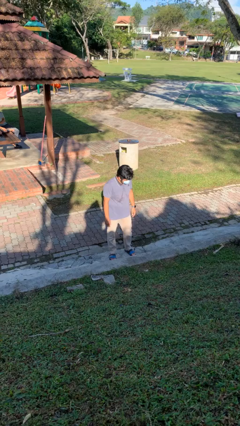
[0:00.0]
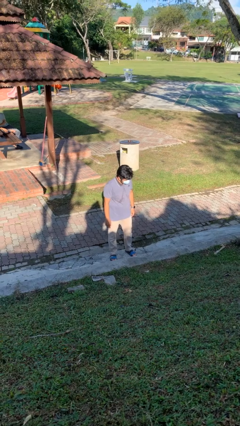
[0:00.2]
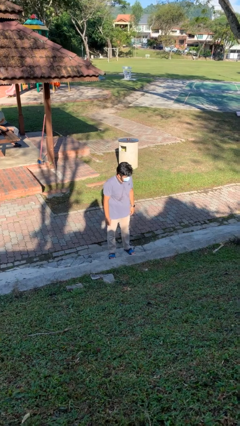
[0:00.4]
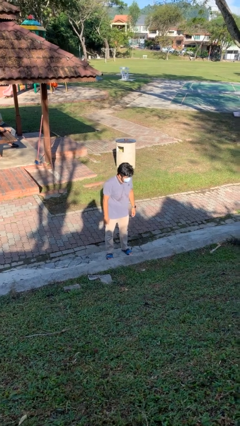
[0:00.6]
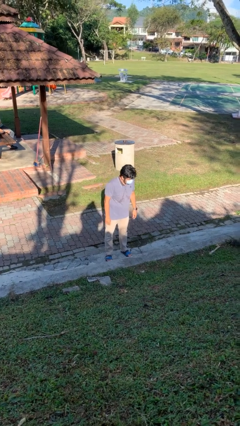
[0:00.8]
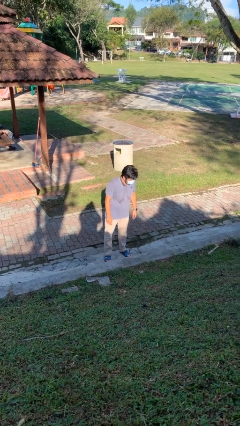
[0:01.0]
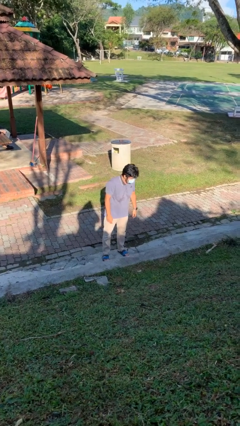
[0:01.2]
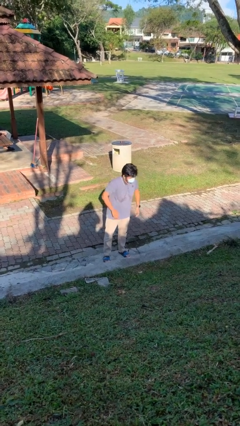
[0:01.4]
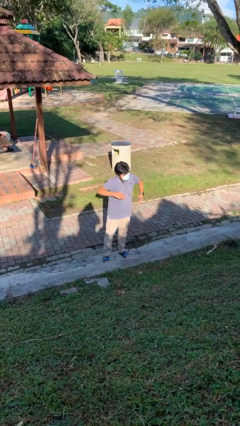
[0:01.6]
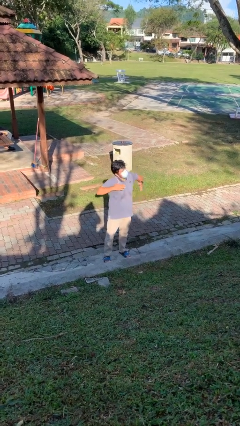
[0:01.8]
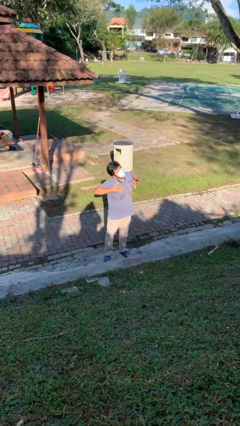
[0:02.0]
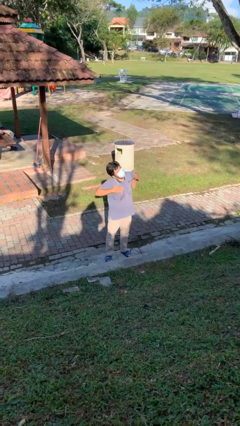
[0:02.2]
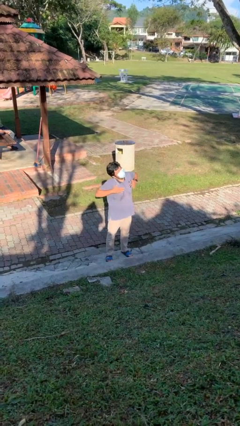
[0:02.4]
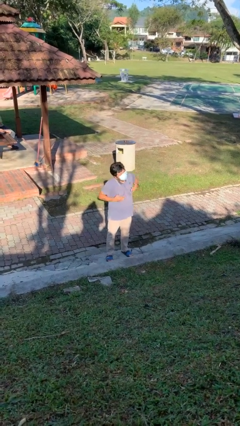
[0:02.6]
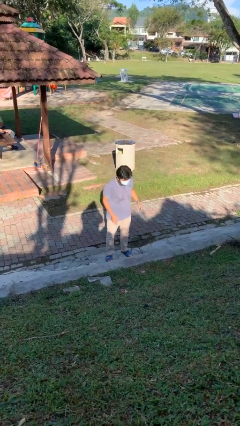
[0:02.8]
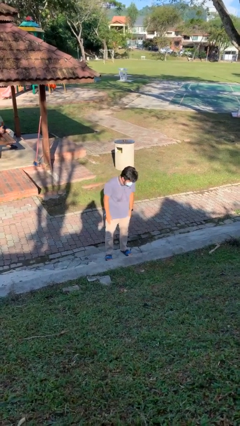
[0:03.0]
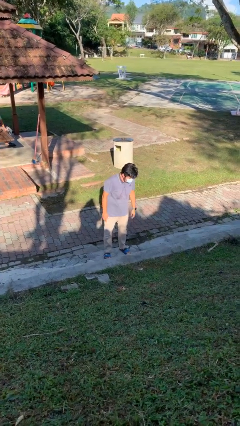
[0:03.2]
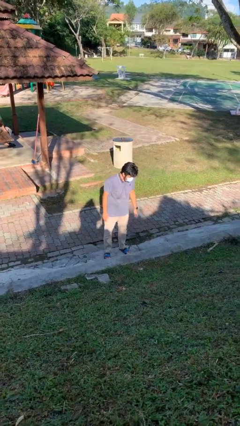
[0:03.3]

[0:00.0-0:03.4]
person drums on chest

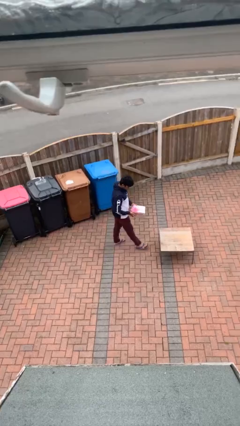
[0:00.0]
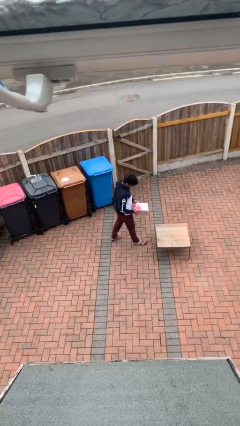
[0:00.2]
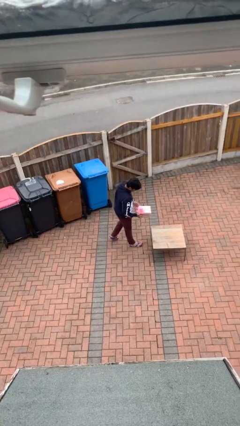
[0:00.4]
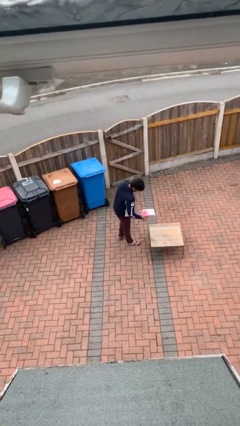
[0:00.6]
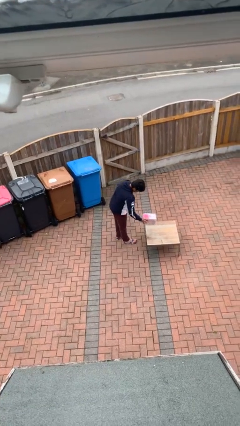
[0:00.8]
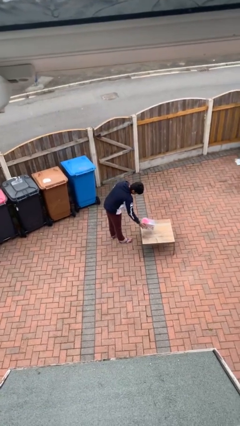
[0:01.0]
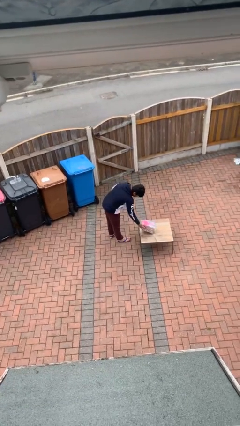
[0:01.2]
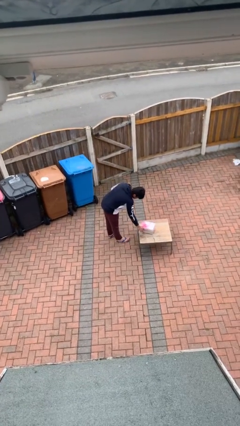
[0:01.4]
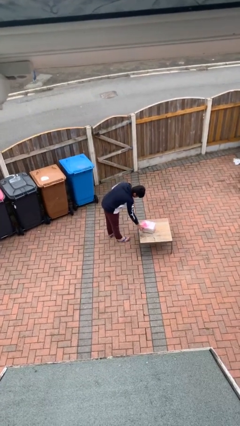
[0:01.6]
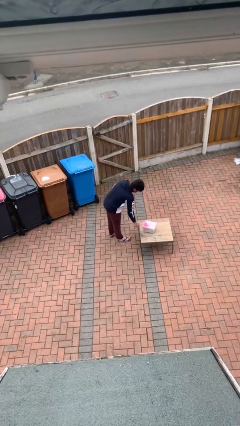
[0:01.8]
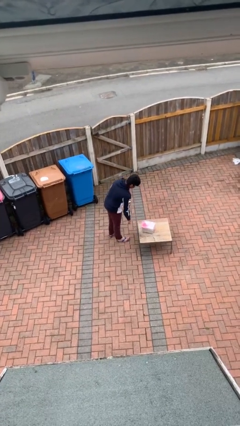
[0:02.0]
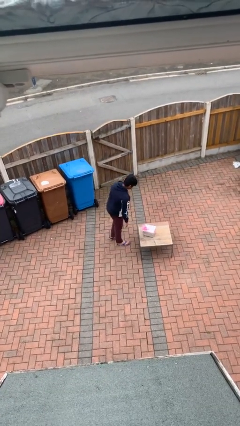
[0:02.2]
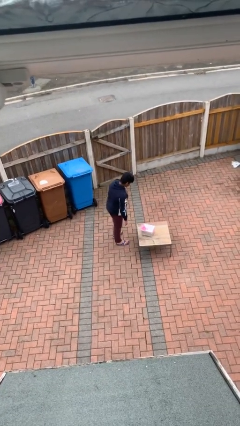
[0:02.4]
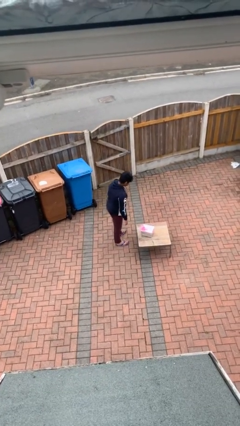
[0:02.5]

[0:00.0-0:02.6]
person puts down object on table

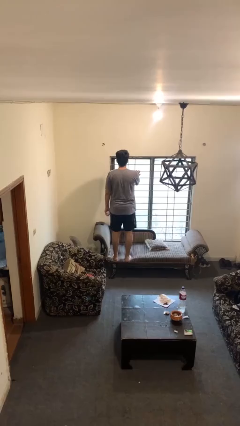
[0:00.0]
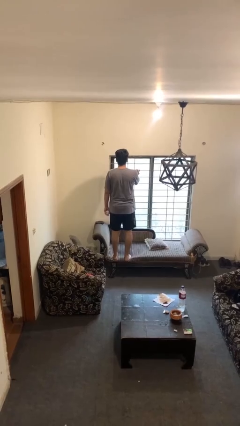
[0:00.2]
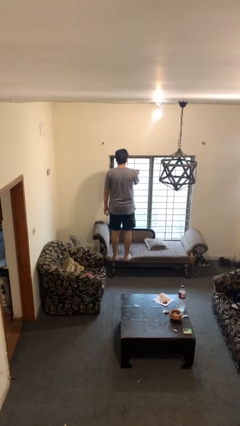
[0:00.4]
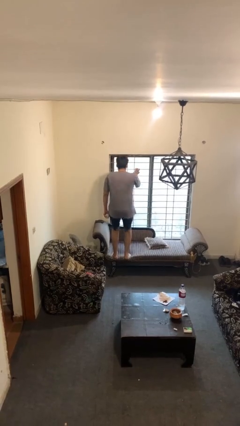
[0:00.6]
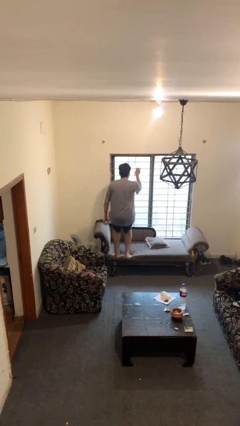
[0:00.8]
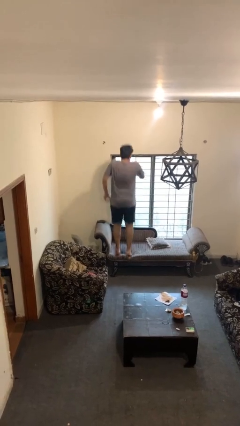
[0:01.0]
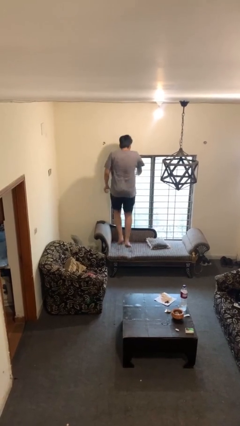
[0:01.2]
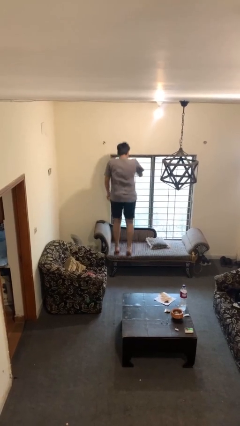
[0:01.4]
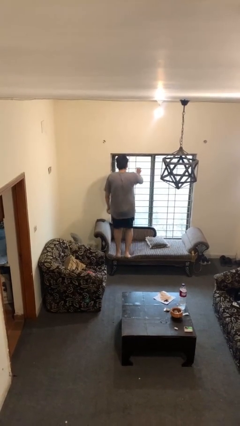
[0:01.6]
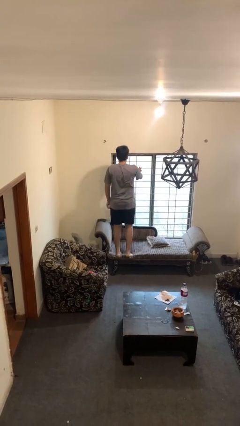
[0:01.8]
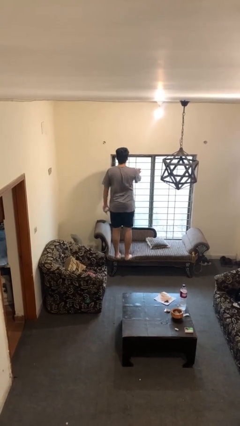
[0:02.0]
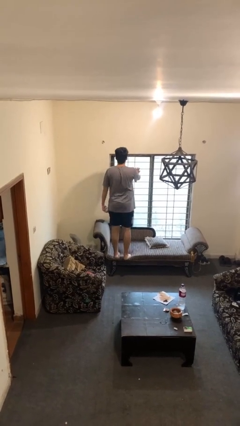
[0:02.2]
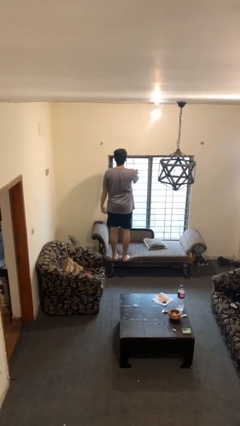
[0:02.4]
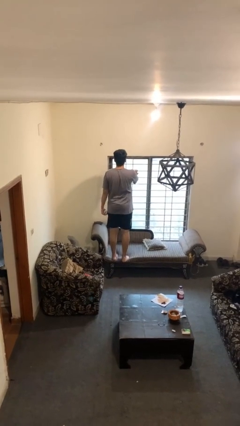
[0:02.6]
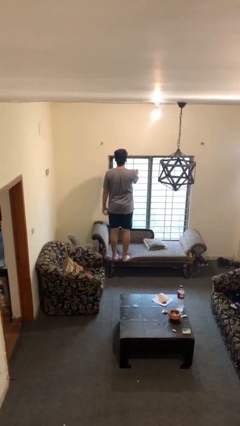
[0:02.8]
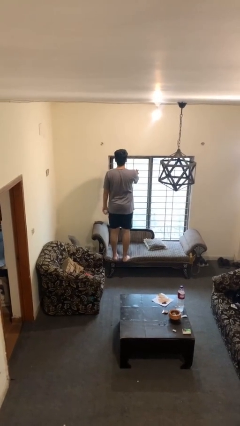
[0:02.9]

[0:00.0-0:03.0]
person jumps on couch

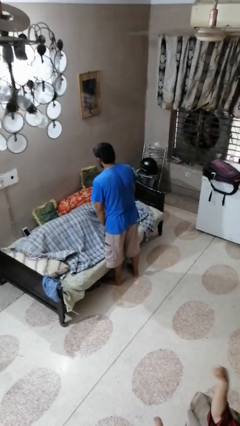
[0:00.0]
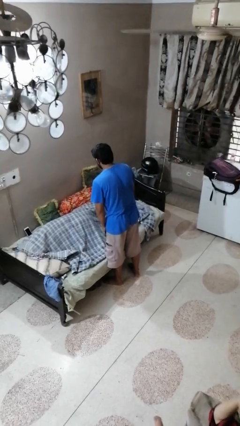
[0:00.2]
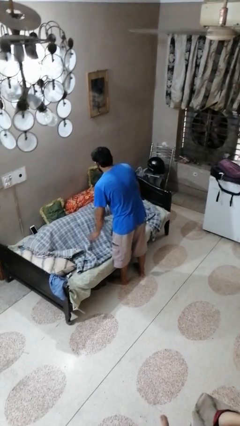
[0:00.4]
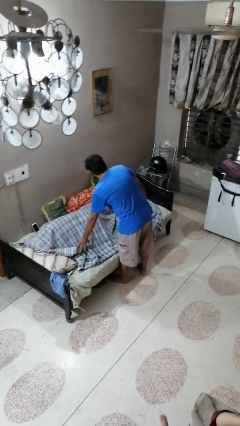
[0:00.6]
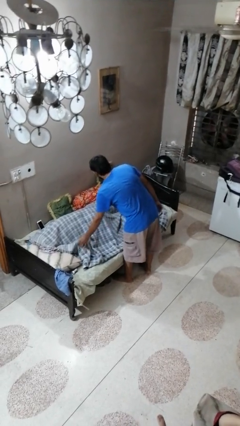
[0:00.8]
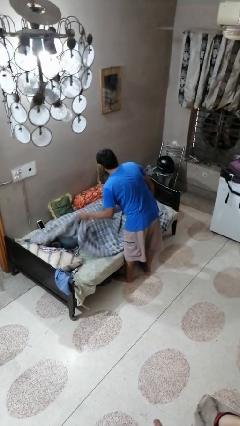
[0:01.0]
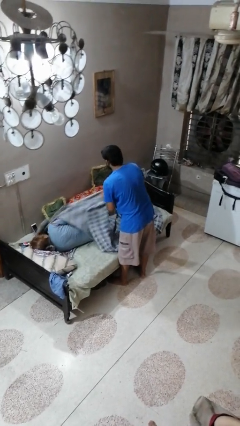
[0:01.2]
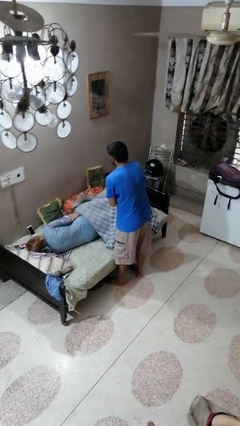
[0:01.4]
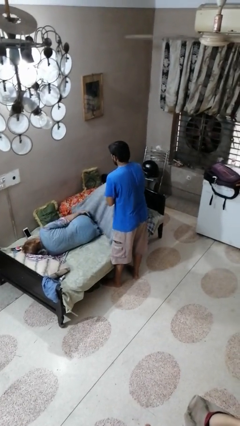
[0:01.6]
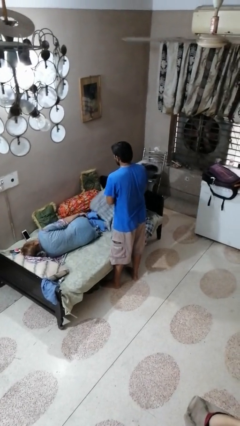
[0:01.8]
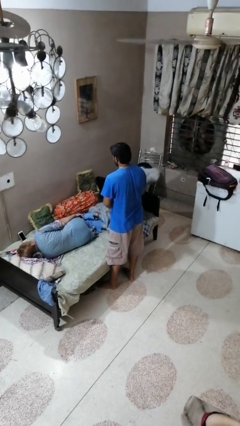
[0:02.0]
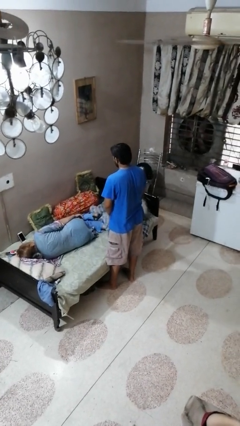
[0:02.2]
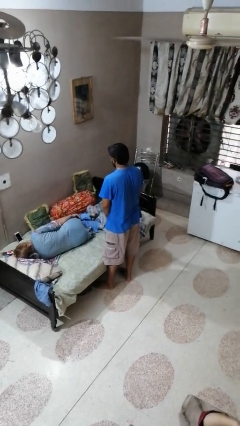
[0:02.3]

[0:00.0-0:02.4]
person uncovers friend with blanket

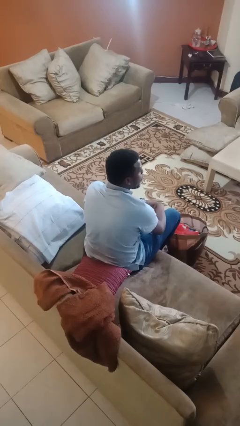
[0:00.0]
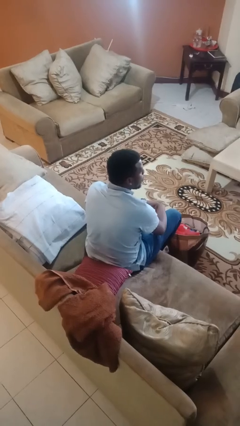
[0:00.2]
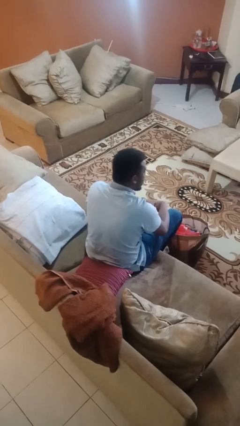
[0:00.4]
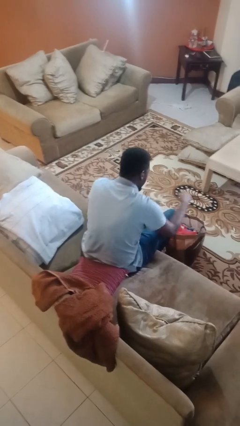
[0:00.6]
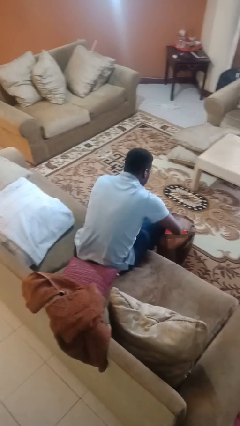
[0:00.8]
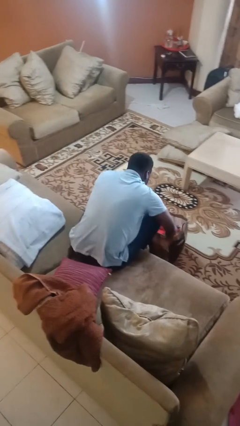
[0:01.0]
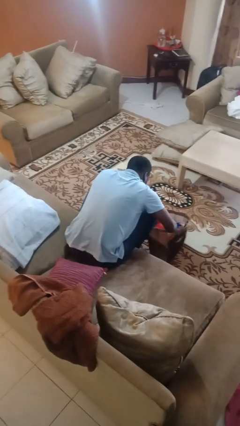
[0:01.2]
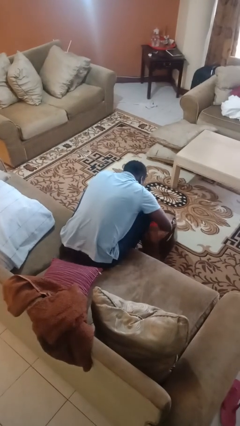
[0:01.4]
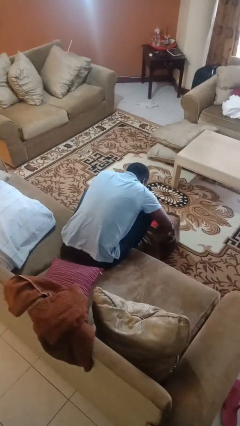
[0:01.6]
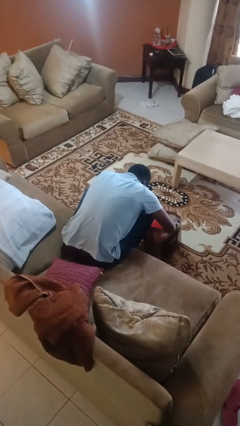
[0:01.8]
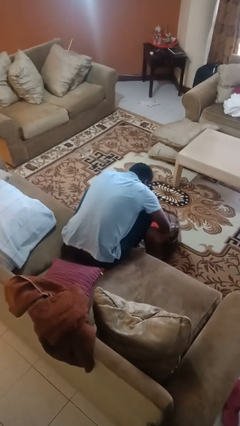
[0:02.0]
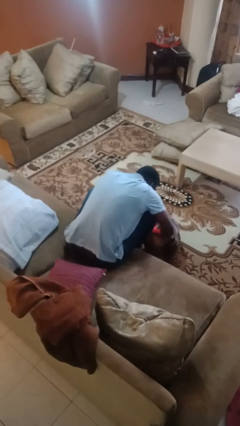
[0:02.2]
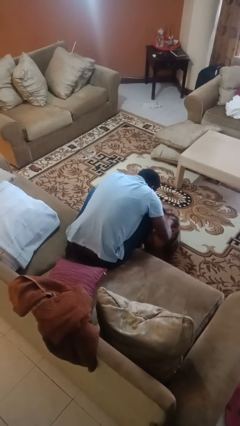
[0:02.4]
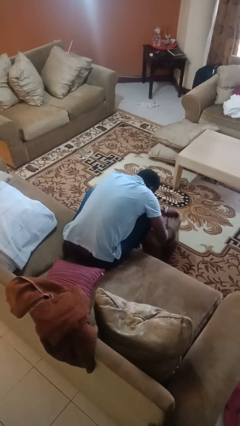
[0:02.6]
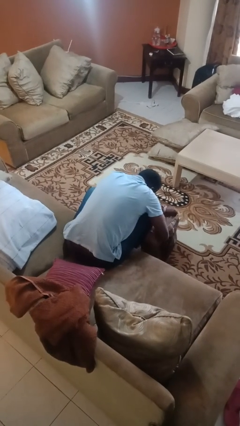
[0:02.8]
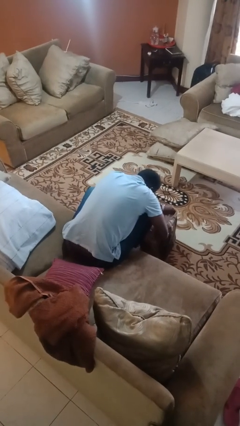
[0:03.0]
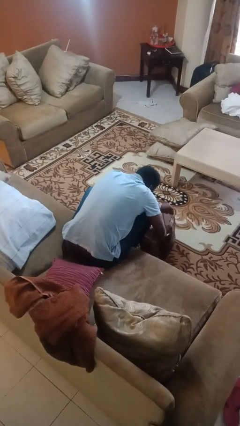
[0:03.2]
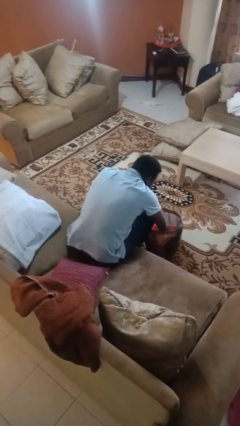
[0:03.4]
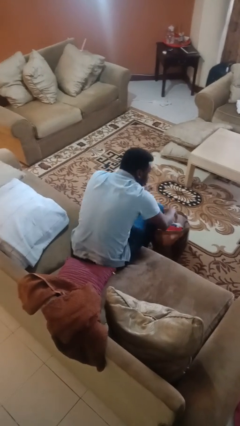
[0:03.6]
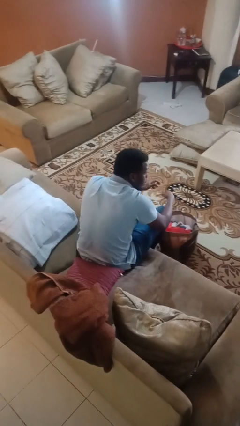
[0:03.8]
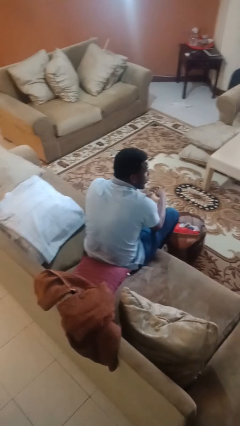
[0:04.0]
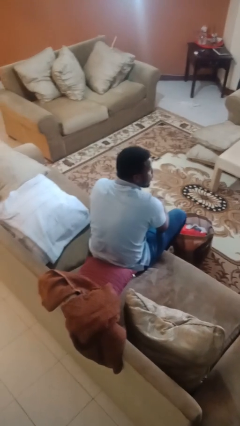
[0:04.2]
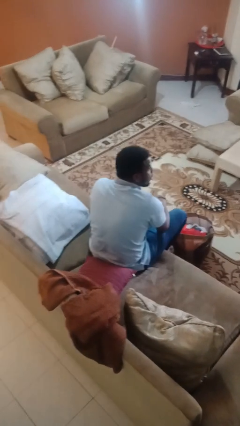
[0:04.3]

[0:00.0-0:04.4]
person searches in bag

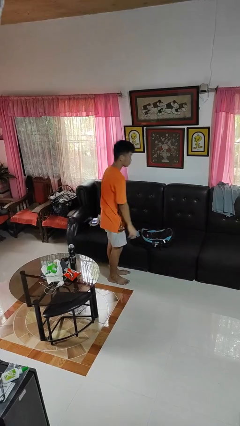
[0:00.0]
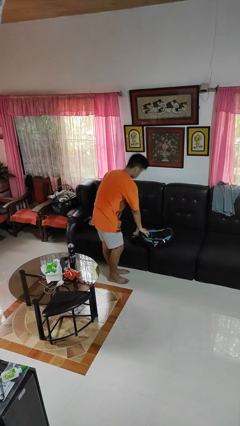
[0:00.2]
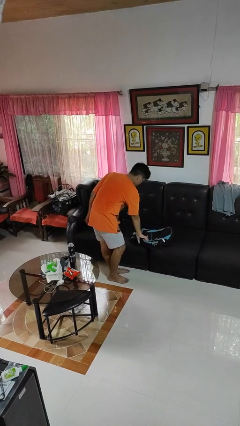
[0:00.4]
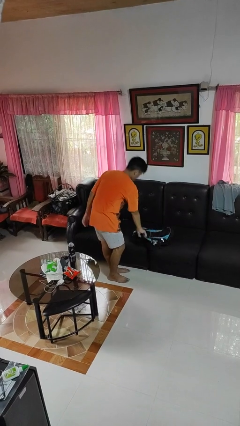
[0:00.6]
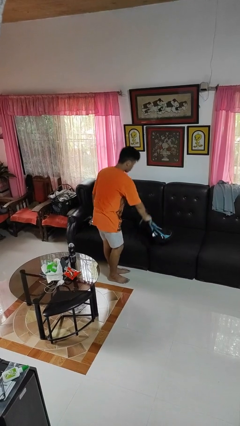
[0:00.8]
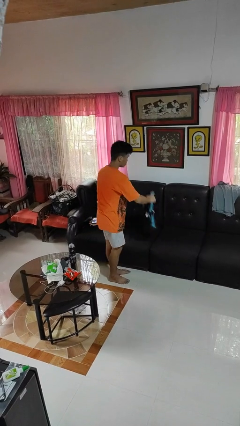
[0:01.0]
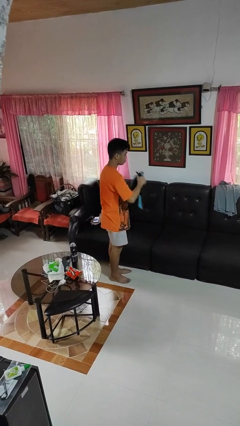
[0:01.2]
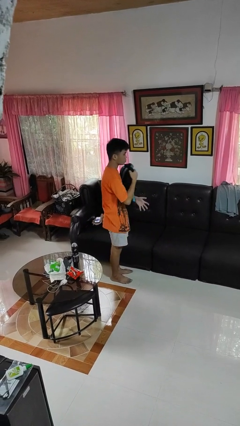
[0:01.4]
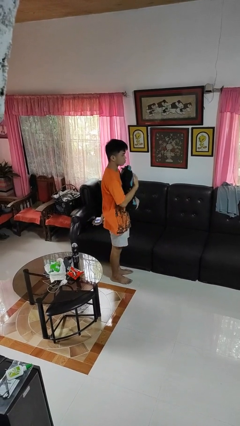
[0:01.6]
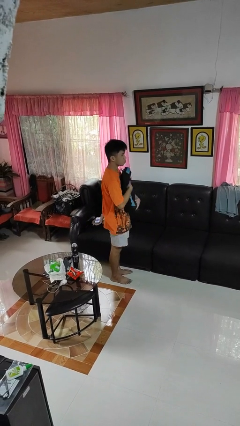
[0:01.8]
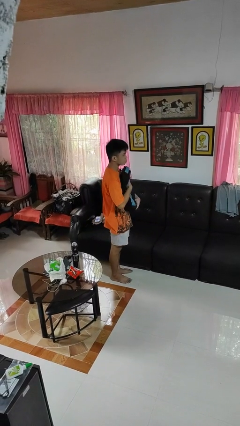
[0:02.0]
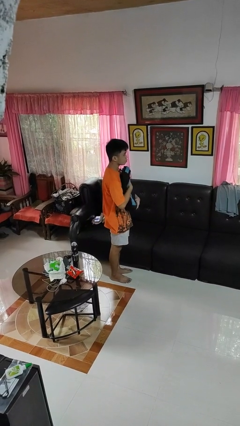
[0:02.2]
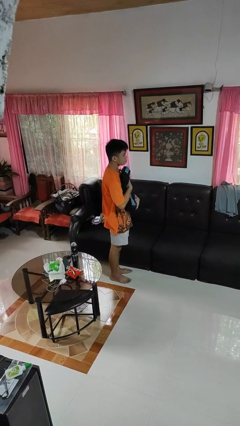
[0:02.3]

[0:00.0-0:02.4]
person picks up object from couch
